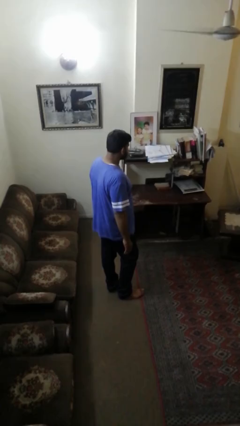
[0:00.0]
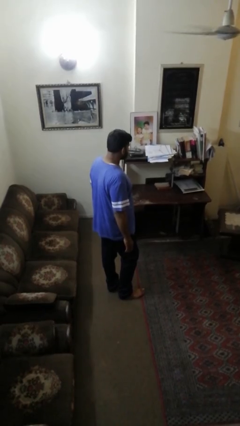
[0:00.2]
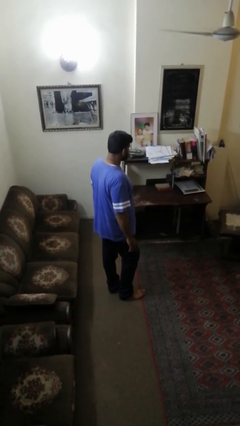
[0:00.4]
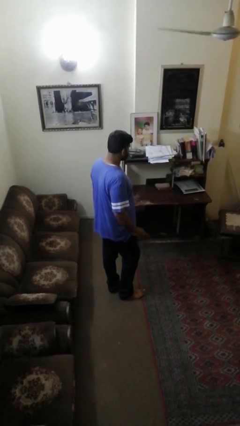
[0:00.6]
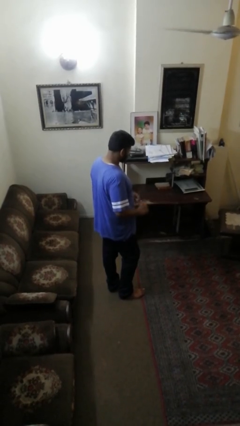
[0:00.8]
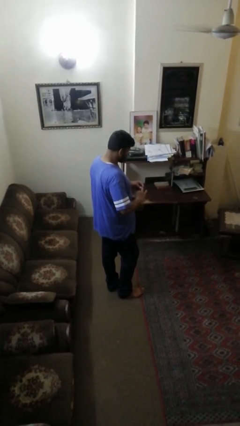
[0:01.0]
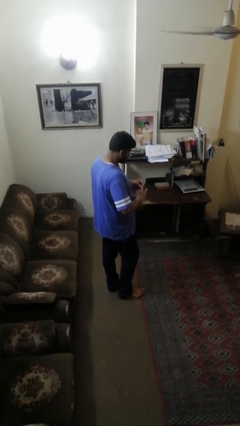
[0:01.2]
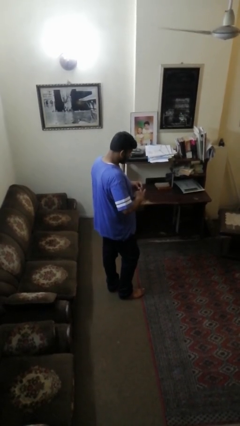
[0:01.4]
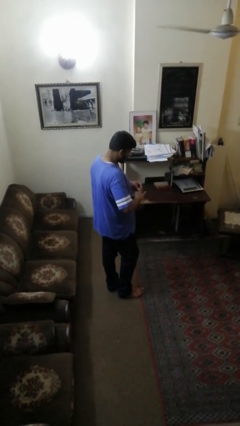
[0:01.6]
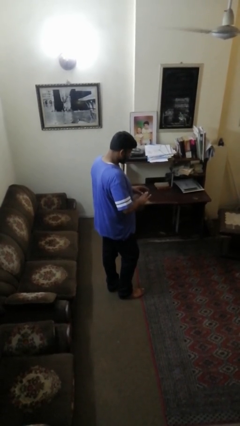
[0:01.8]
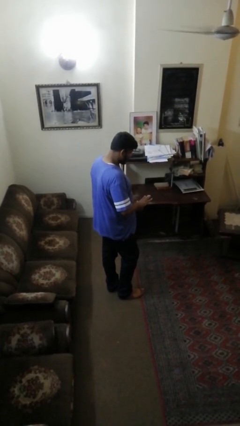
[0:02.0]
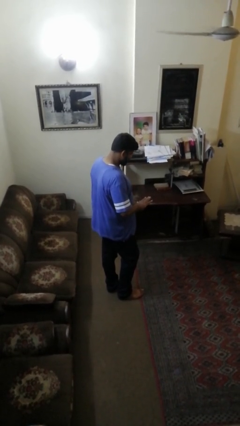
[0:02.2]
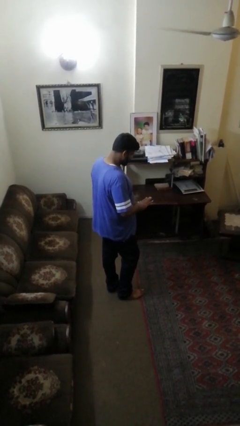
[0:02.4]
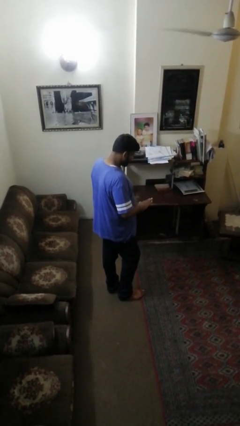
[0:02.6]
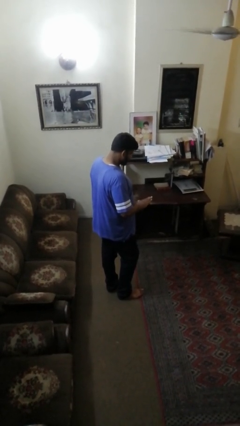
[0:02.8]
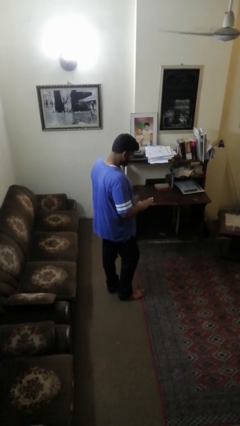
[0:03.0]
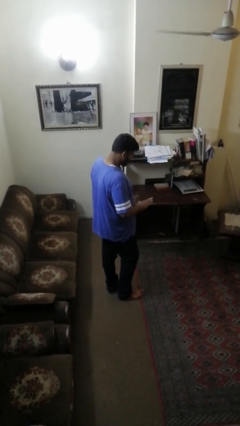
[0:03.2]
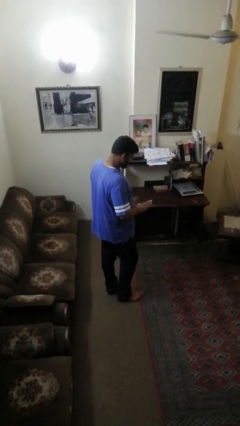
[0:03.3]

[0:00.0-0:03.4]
person puts on ring

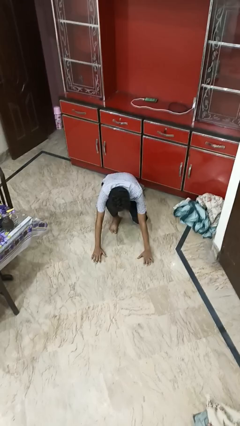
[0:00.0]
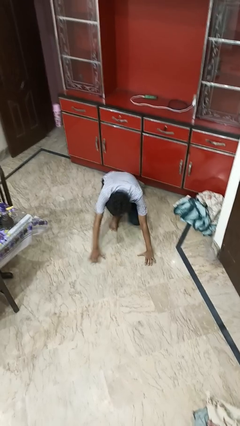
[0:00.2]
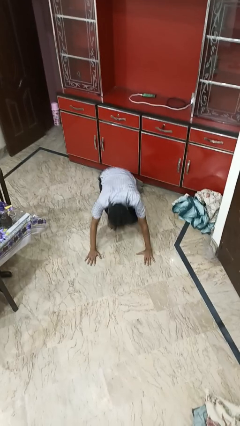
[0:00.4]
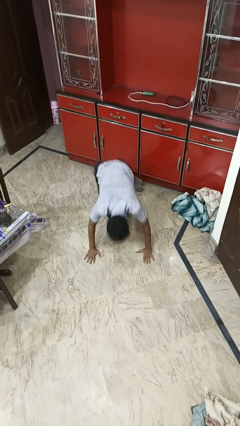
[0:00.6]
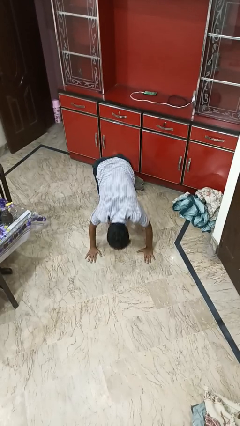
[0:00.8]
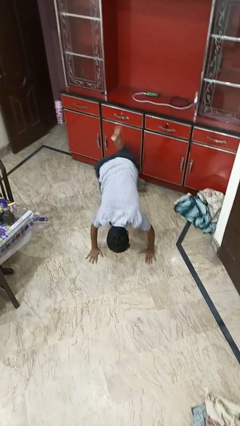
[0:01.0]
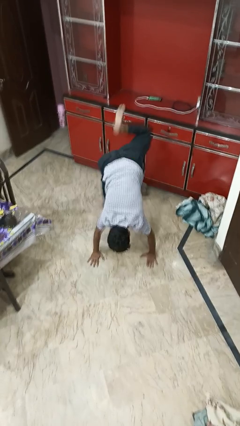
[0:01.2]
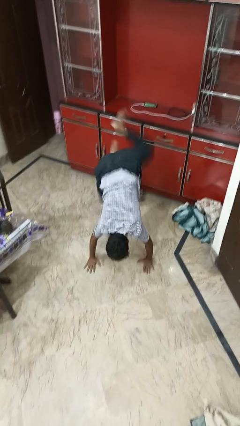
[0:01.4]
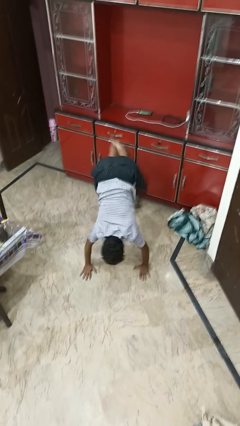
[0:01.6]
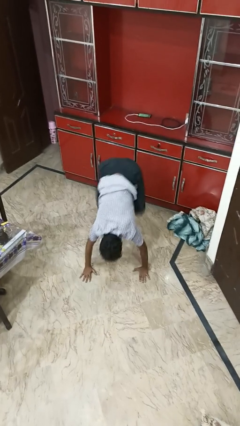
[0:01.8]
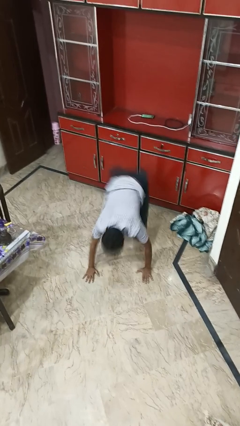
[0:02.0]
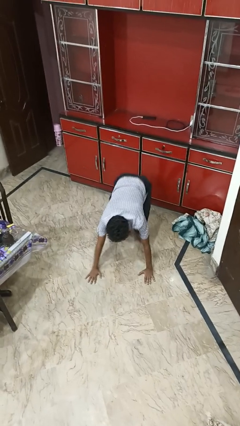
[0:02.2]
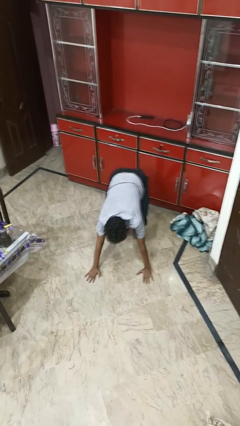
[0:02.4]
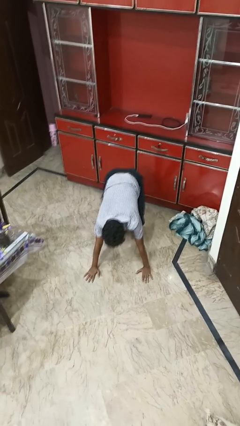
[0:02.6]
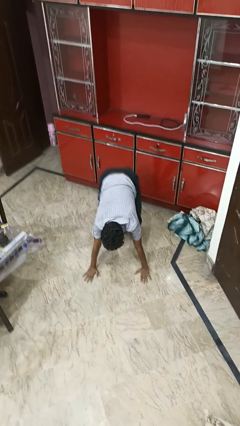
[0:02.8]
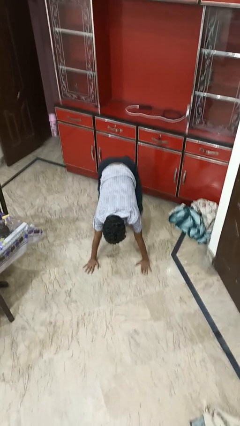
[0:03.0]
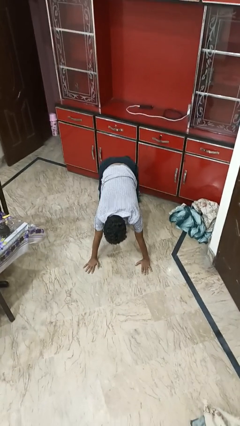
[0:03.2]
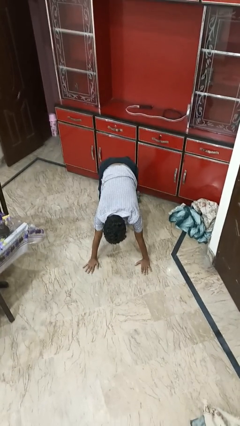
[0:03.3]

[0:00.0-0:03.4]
person handstand

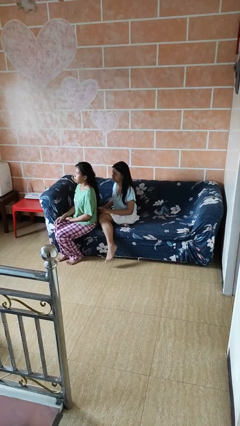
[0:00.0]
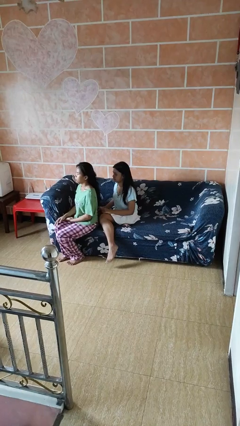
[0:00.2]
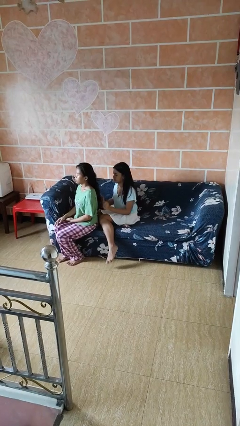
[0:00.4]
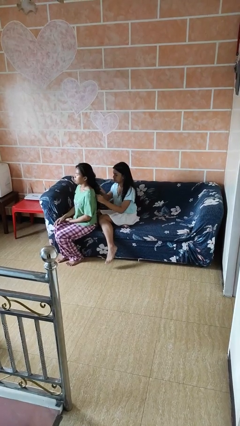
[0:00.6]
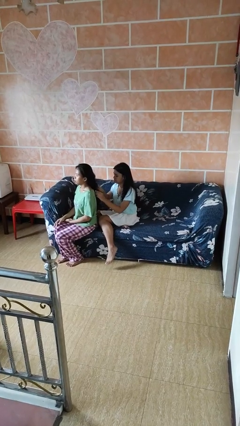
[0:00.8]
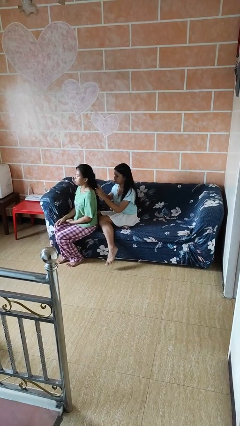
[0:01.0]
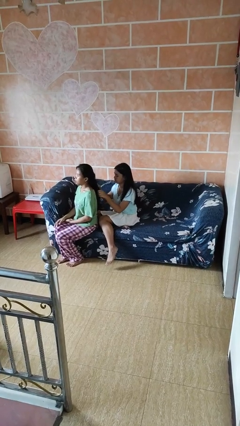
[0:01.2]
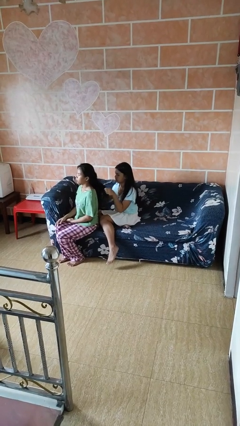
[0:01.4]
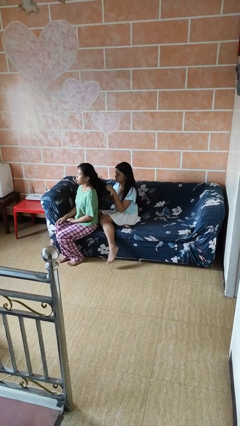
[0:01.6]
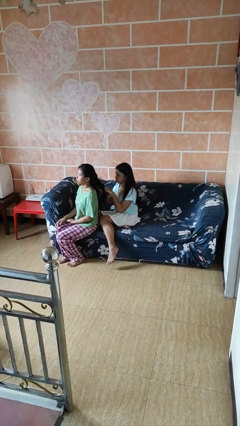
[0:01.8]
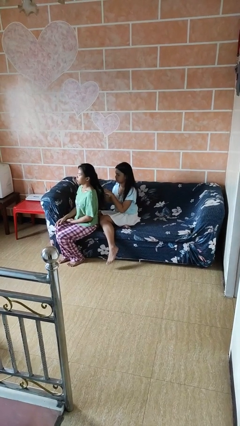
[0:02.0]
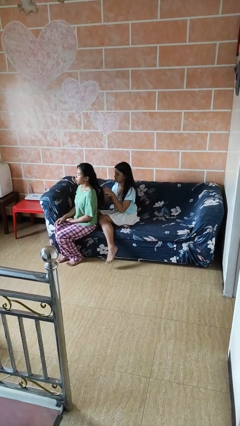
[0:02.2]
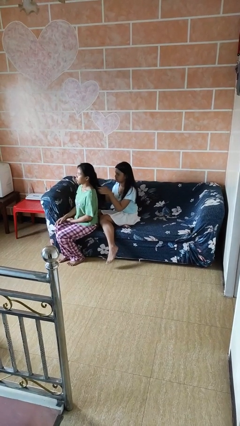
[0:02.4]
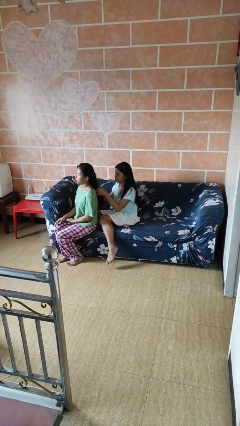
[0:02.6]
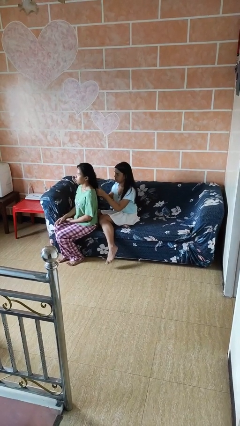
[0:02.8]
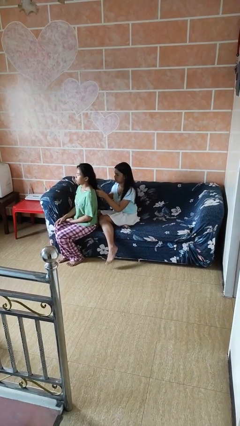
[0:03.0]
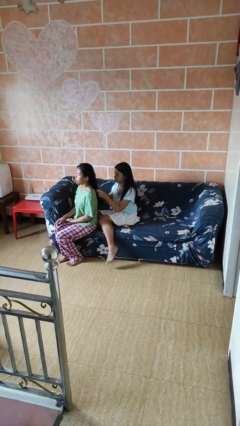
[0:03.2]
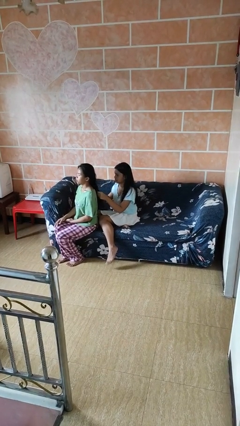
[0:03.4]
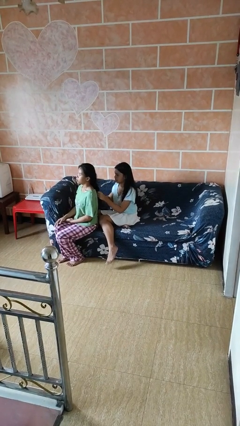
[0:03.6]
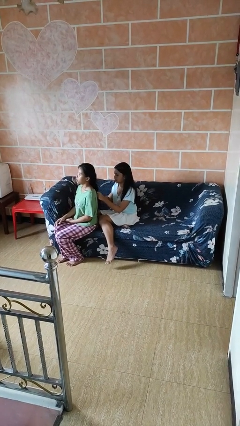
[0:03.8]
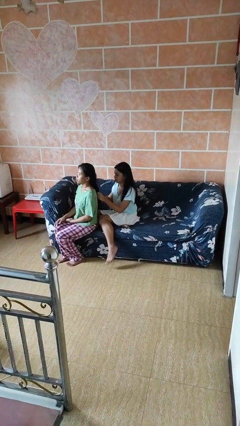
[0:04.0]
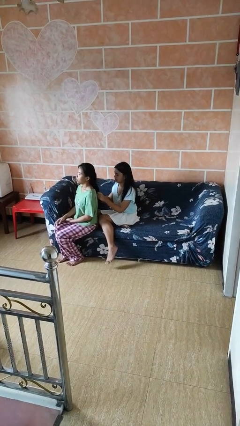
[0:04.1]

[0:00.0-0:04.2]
person braids hair of person

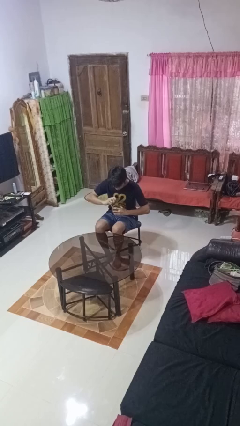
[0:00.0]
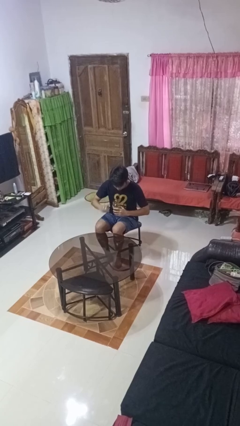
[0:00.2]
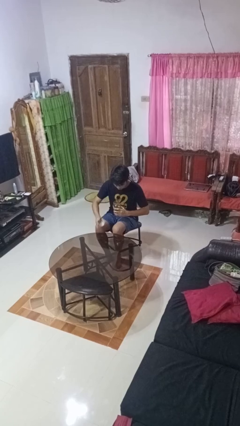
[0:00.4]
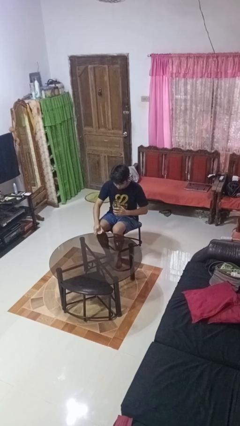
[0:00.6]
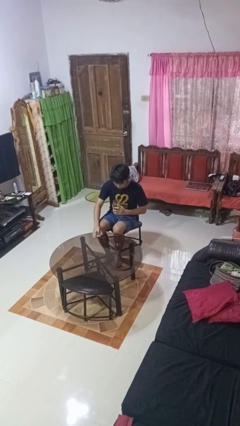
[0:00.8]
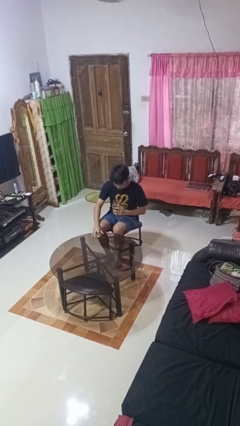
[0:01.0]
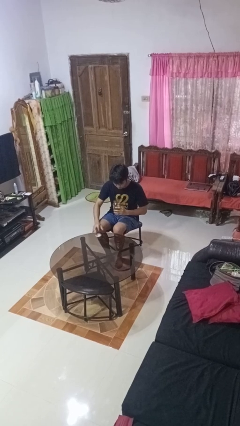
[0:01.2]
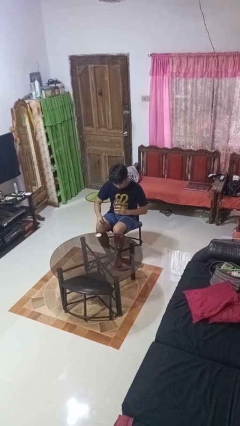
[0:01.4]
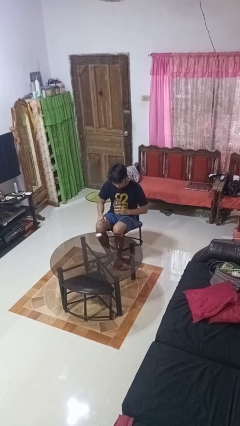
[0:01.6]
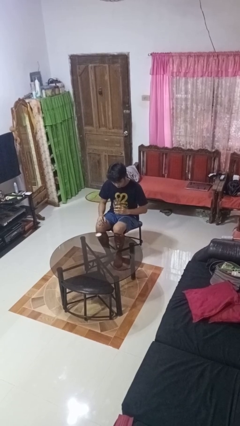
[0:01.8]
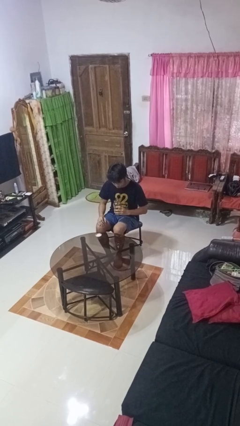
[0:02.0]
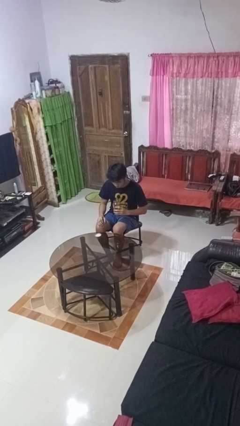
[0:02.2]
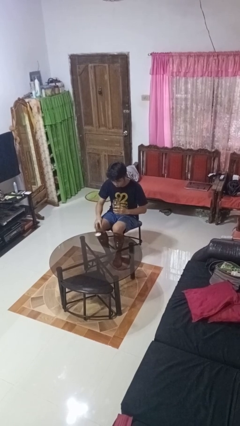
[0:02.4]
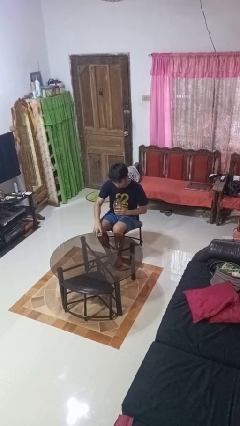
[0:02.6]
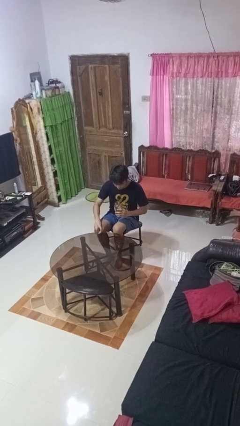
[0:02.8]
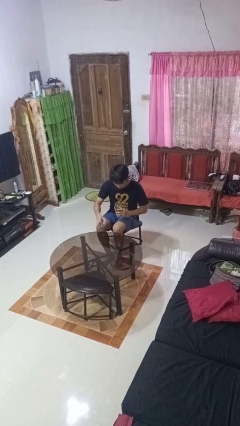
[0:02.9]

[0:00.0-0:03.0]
person opens jar

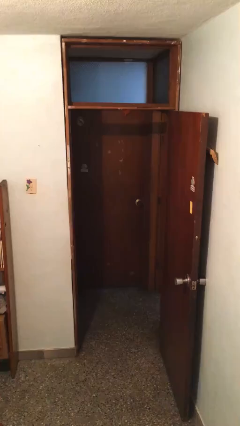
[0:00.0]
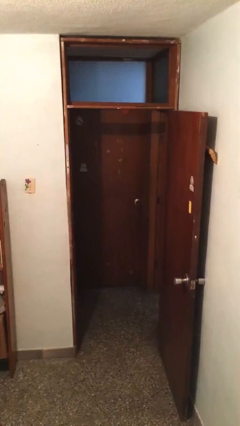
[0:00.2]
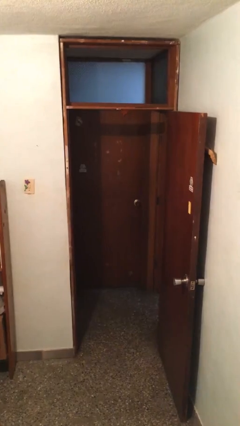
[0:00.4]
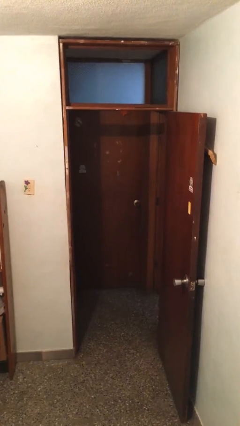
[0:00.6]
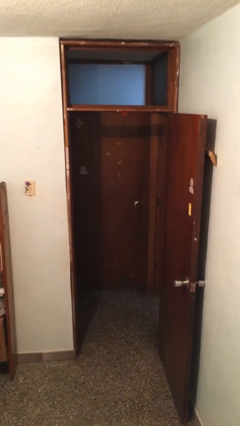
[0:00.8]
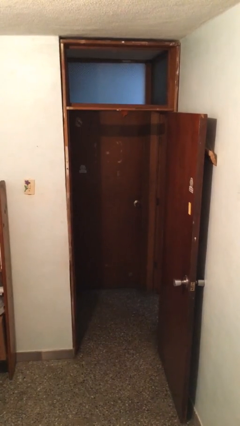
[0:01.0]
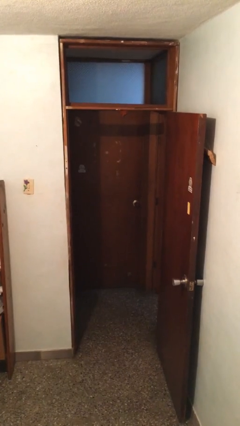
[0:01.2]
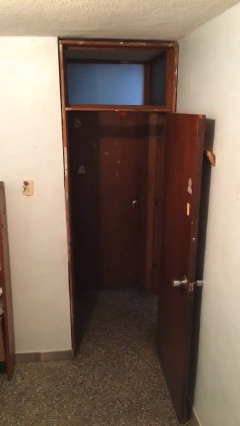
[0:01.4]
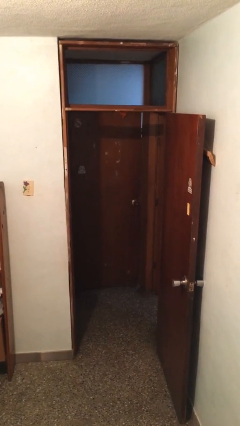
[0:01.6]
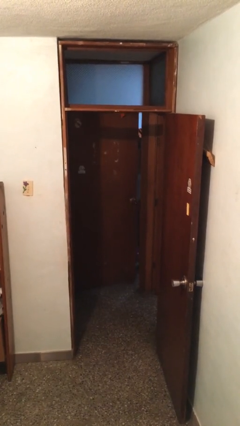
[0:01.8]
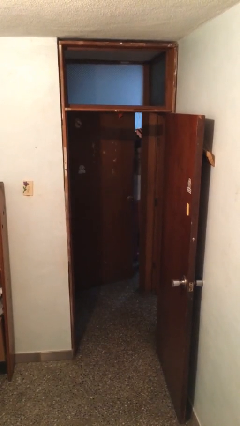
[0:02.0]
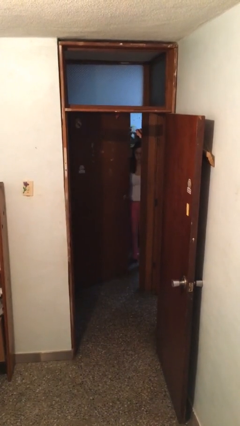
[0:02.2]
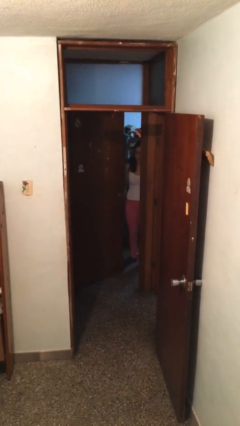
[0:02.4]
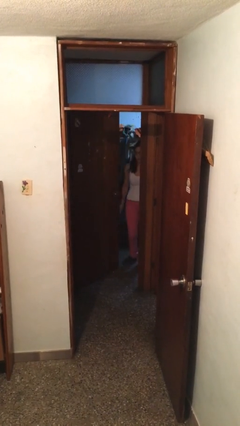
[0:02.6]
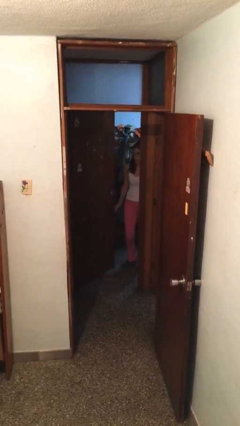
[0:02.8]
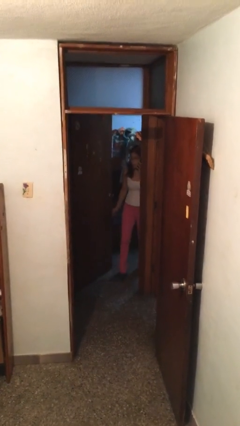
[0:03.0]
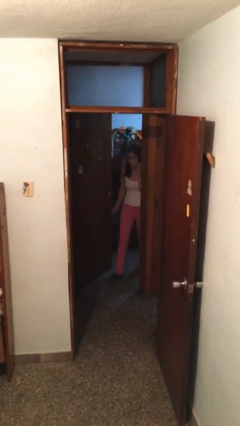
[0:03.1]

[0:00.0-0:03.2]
person opens facility door
